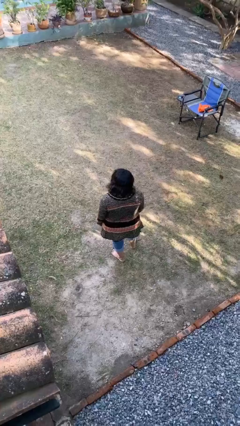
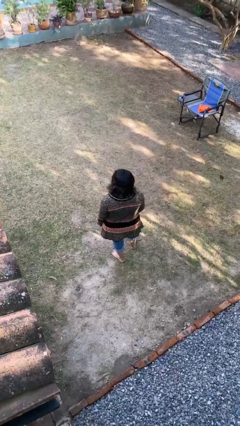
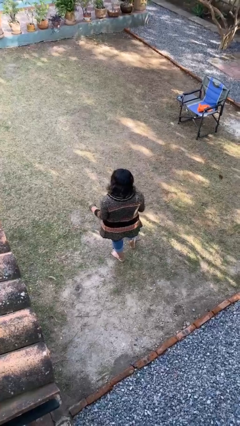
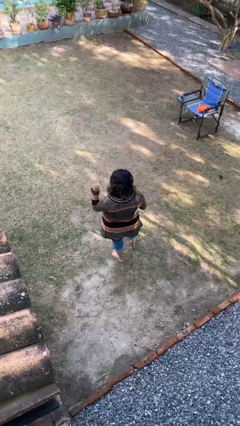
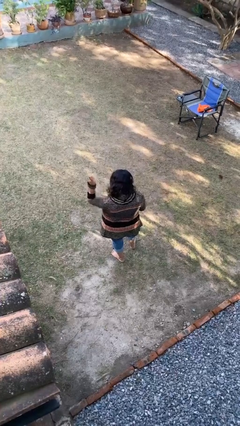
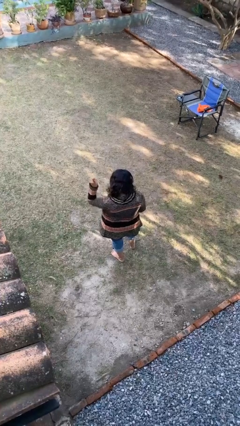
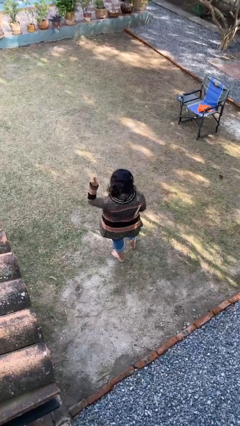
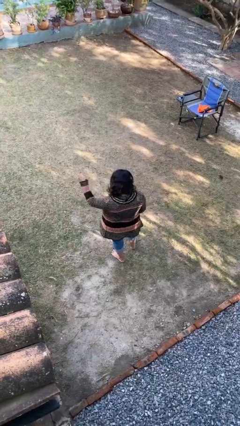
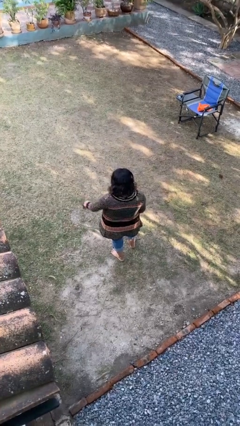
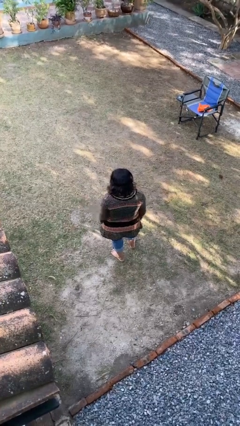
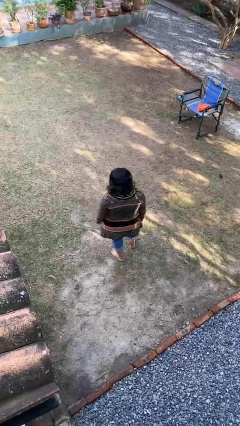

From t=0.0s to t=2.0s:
person gestures number one

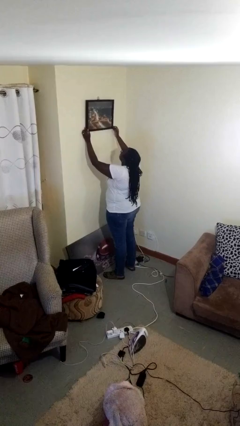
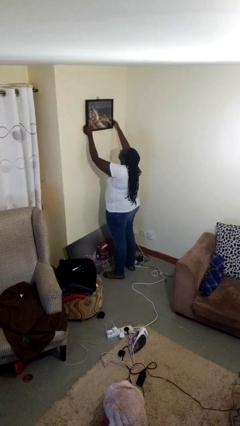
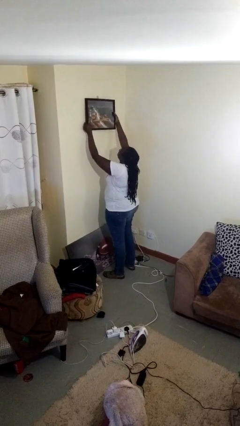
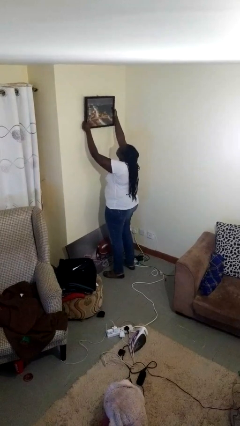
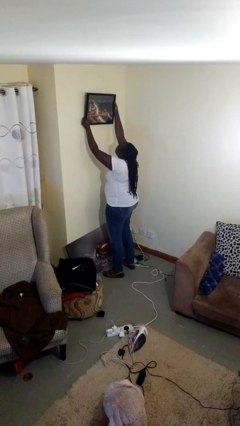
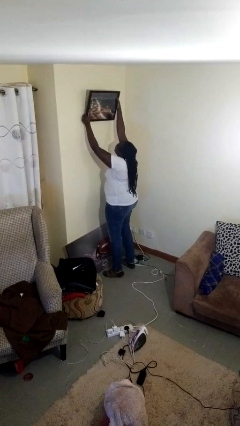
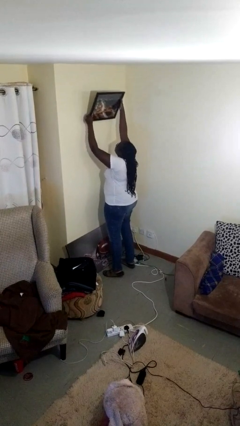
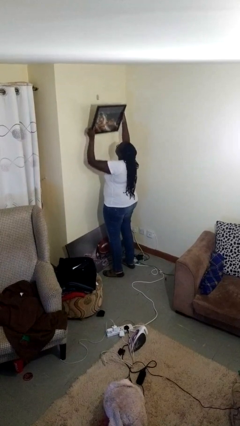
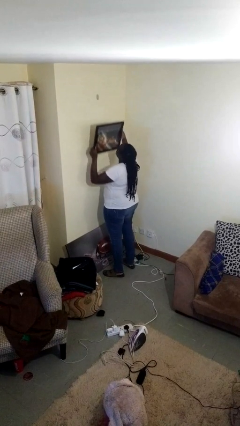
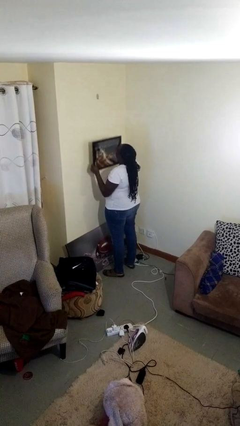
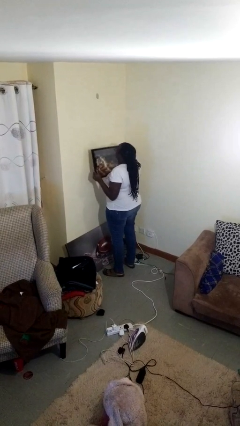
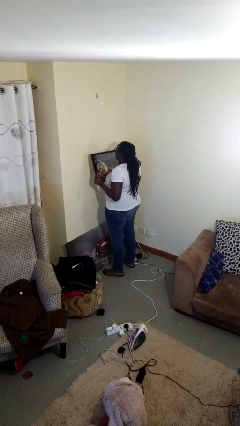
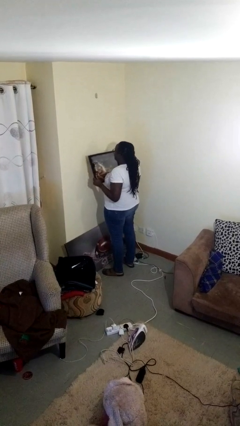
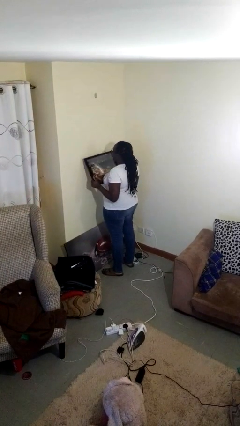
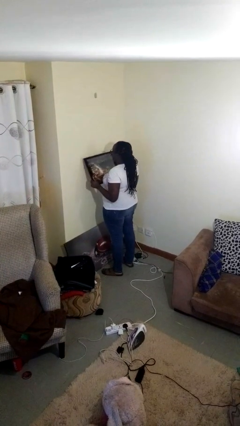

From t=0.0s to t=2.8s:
person takes down picture frame

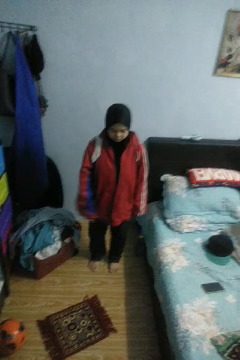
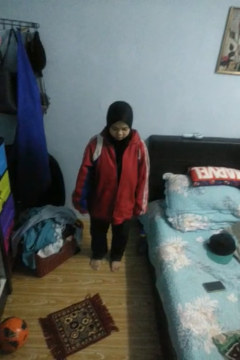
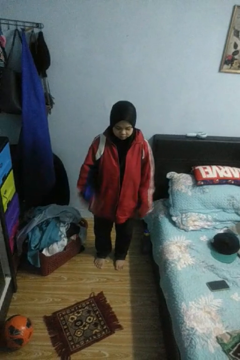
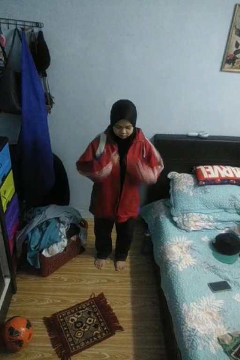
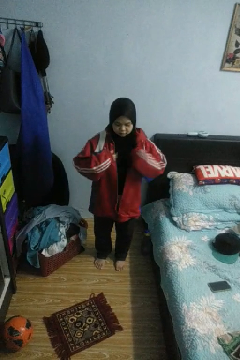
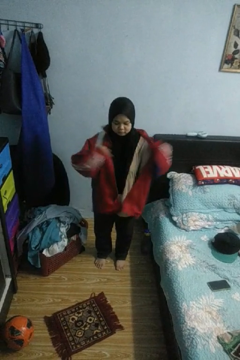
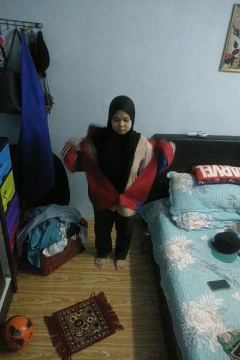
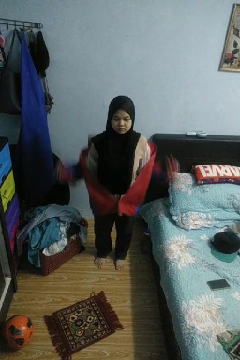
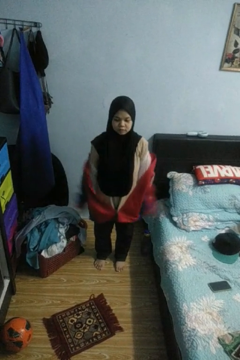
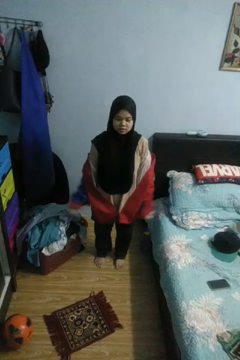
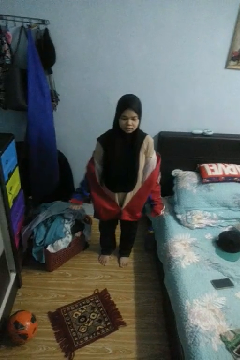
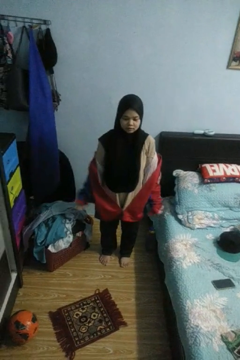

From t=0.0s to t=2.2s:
person takes off jacket

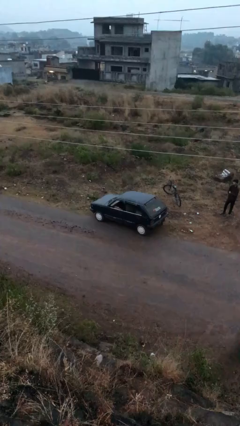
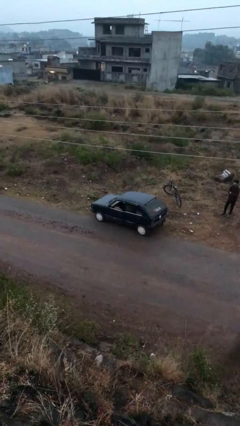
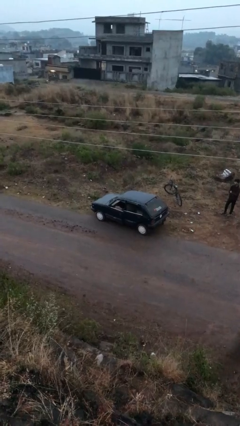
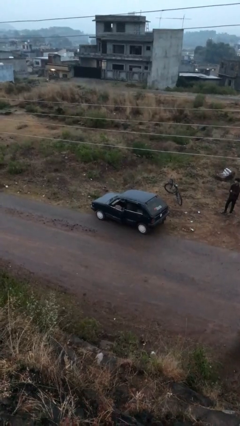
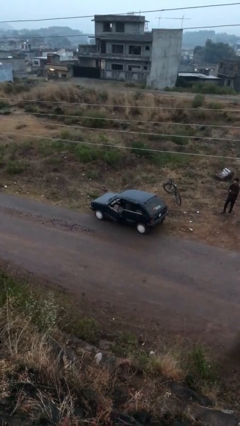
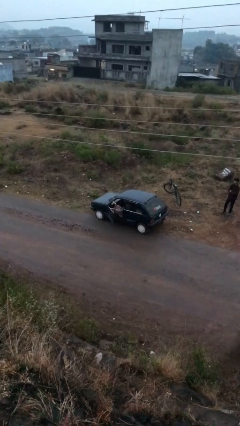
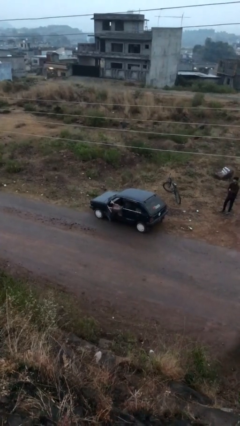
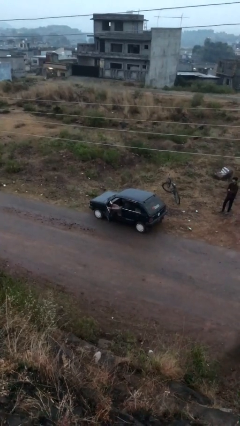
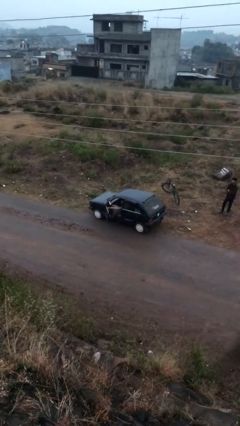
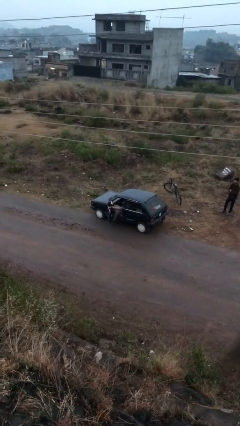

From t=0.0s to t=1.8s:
person opens car door

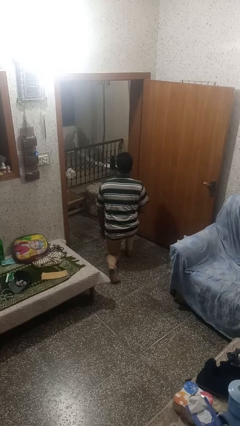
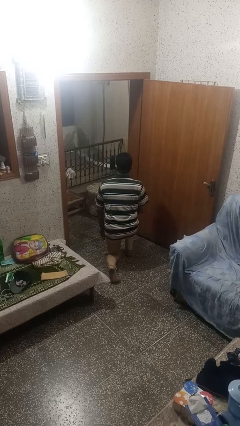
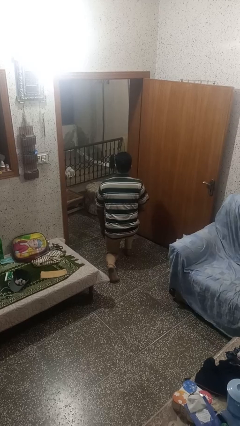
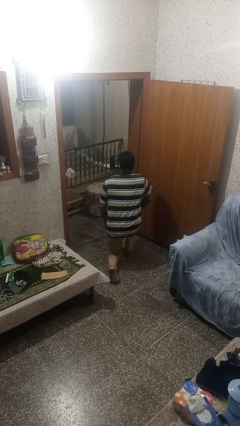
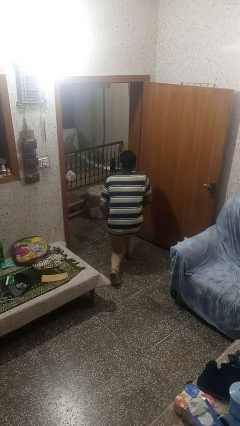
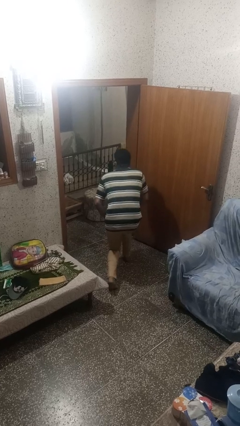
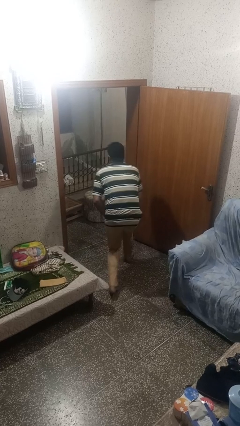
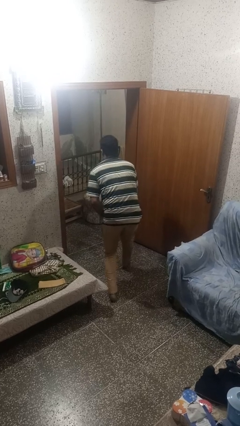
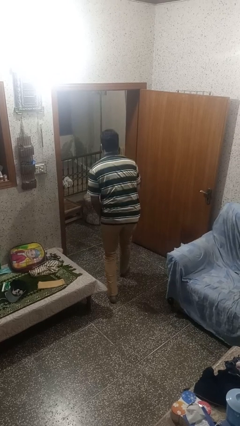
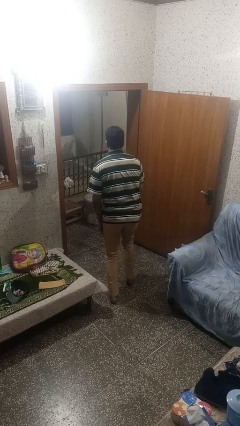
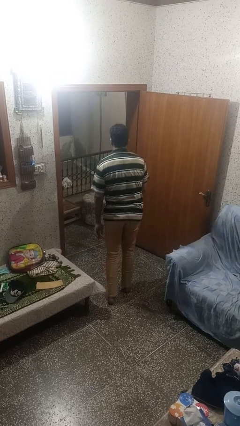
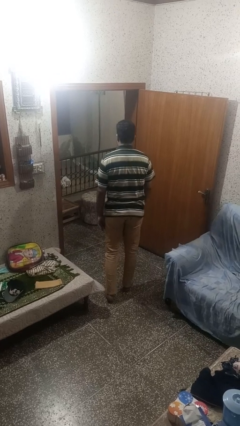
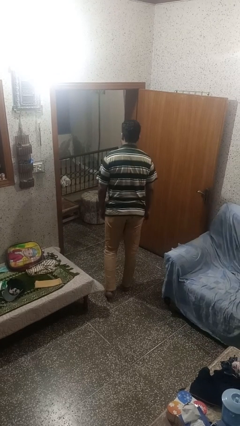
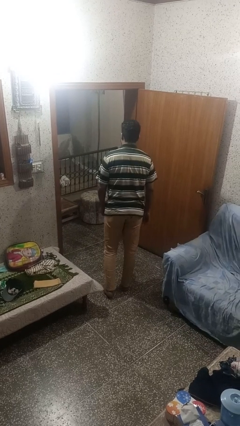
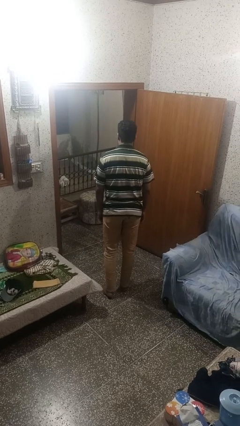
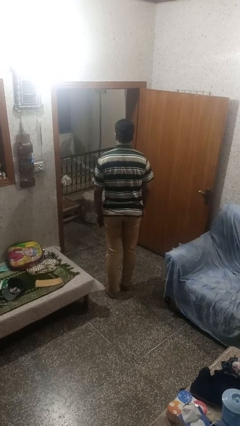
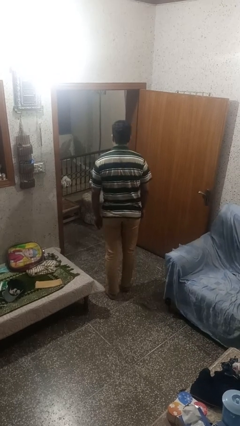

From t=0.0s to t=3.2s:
person stands up from floor

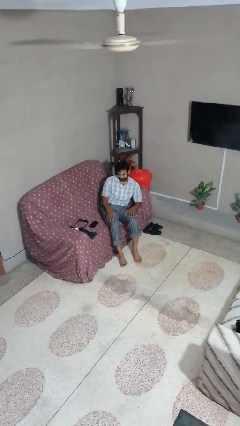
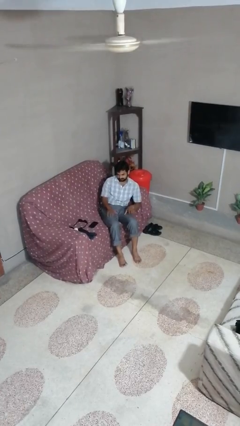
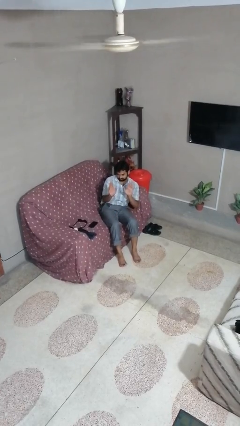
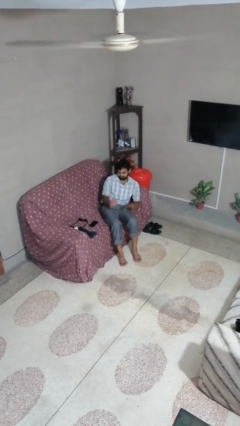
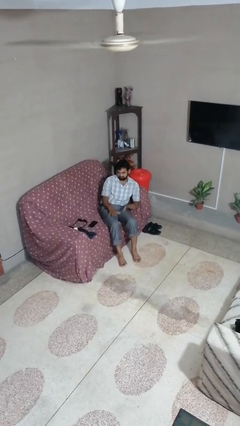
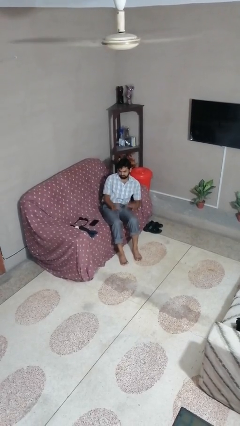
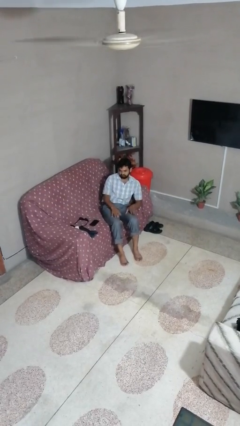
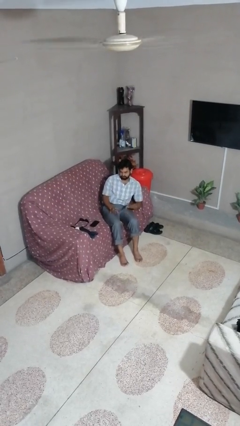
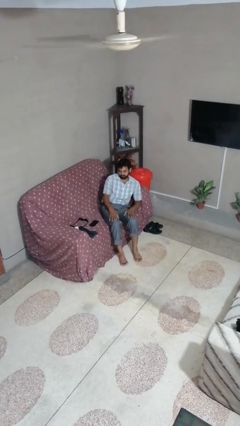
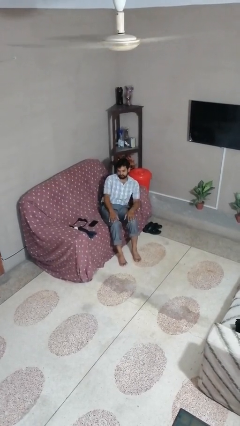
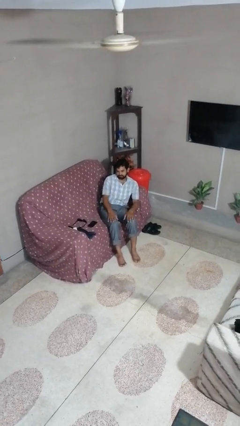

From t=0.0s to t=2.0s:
person slaps hands on thighs

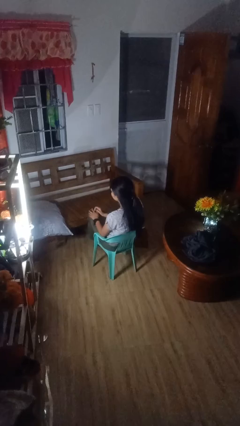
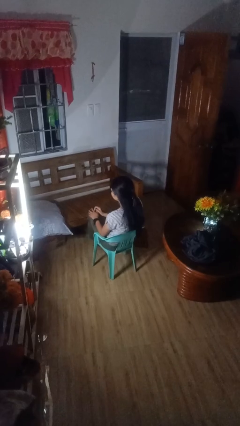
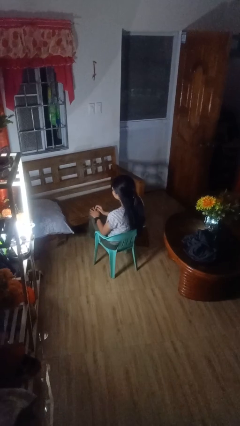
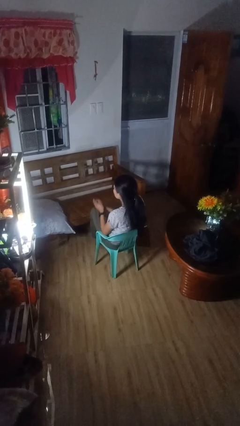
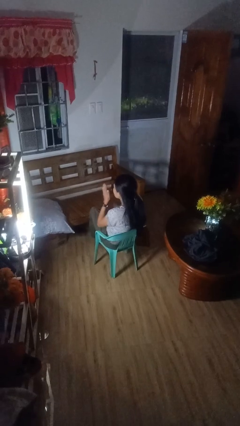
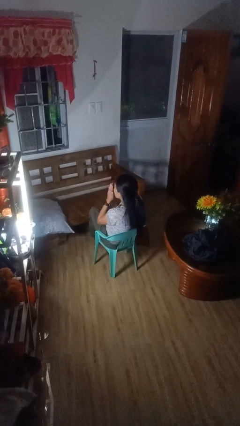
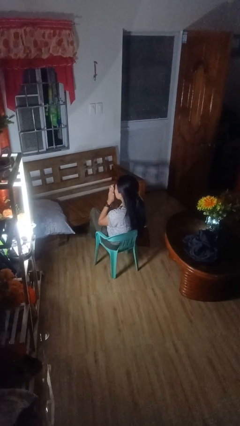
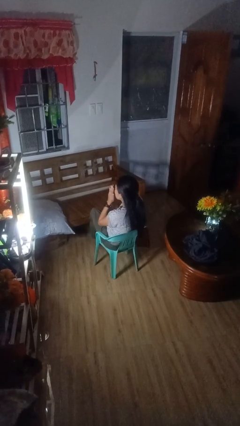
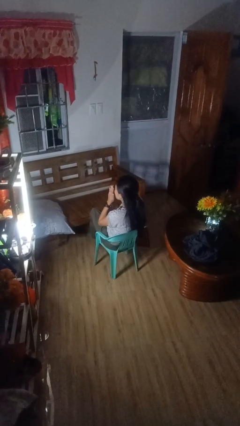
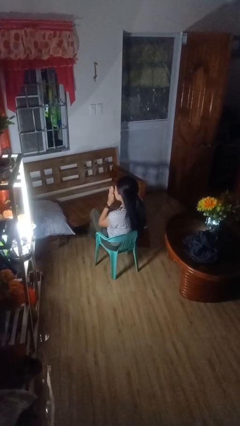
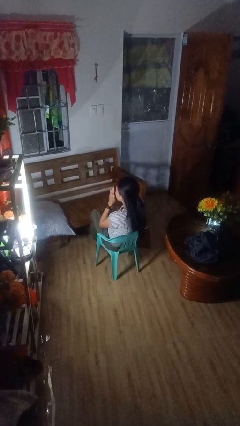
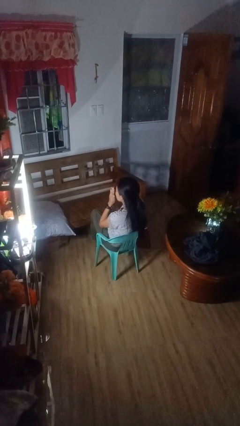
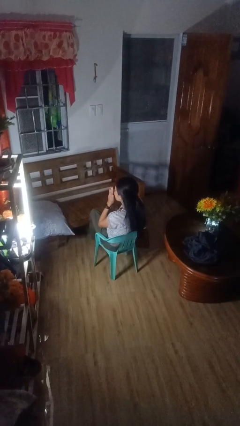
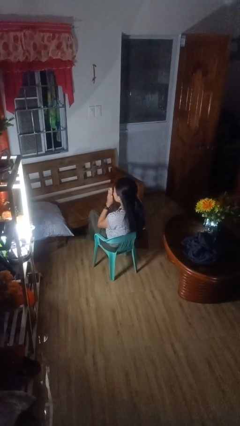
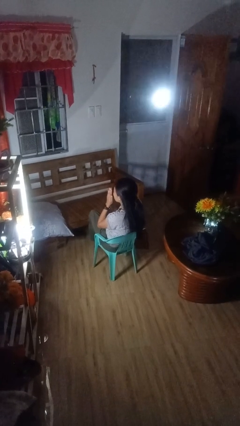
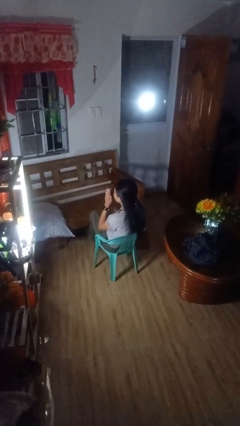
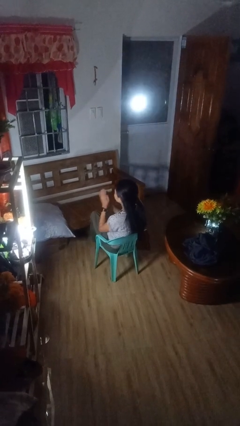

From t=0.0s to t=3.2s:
person blows into hands
